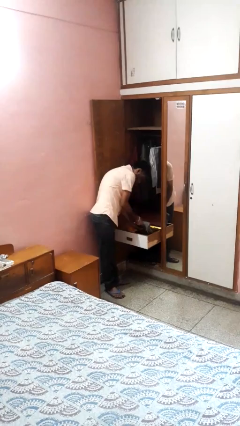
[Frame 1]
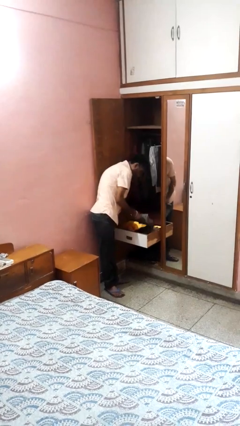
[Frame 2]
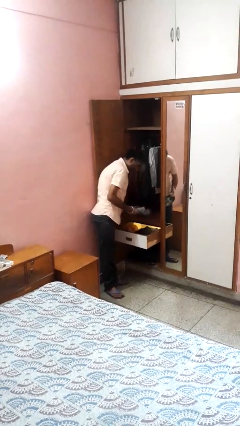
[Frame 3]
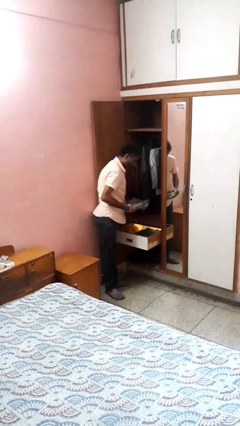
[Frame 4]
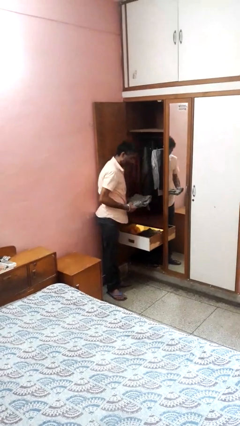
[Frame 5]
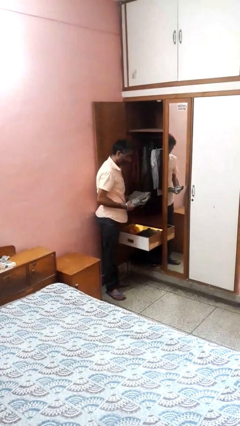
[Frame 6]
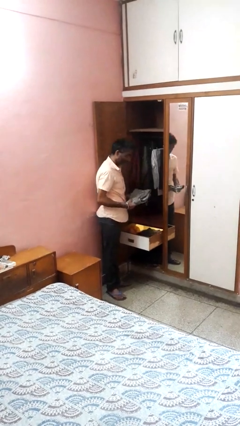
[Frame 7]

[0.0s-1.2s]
person takes clothes from dresser

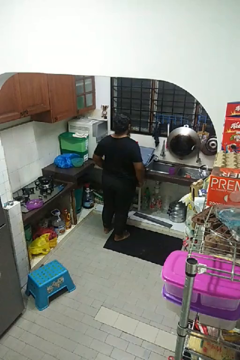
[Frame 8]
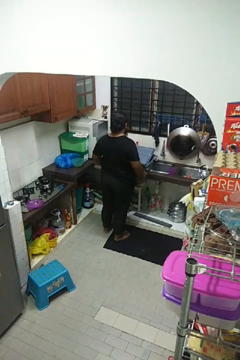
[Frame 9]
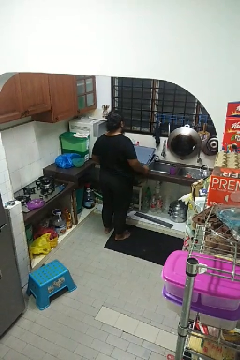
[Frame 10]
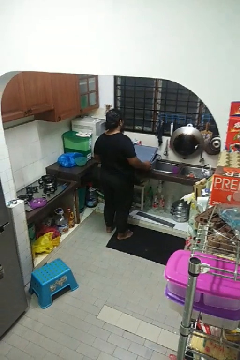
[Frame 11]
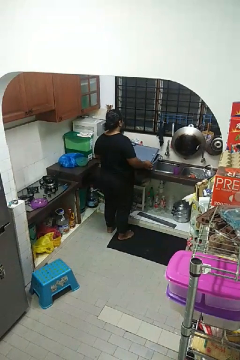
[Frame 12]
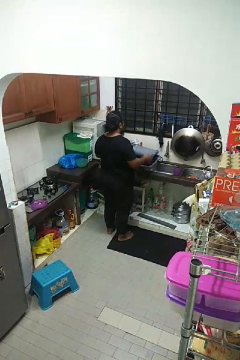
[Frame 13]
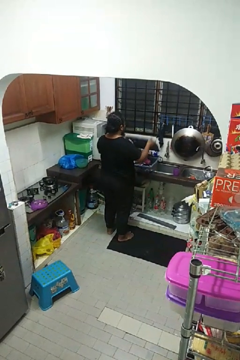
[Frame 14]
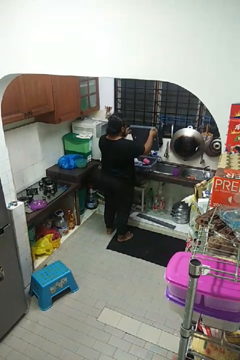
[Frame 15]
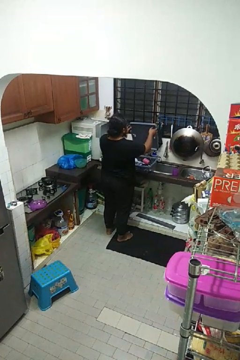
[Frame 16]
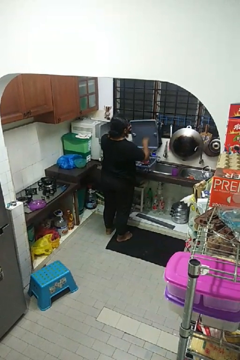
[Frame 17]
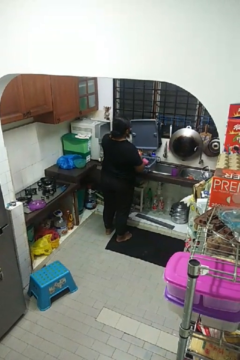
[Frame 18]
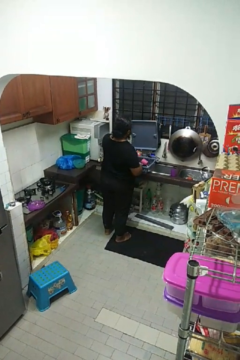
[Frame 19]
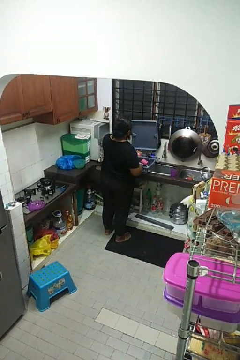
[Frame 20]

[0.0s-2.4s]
person opens dishwasher

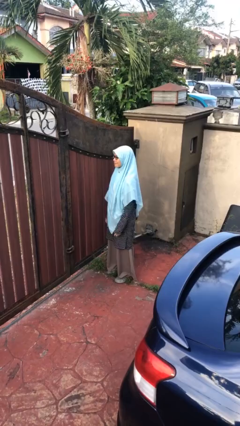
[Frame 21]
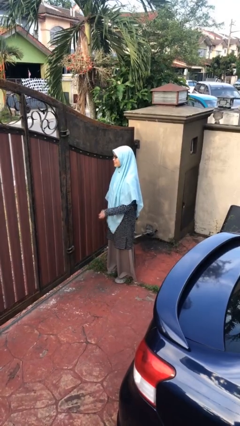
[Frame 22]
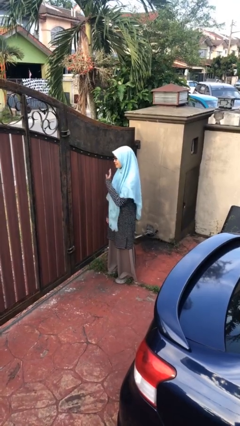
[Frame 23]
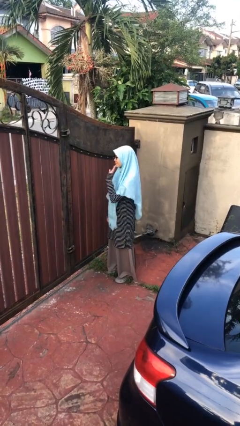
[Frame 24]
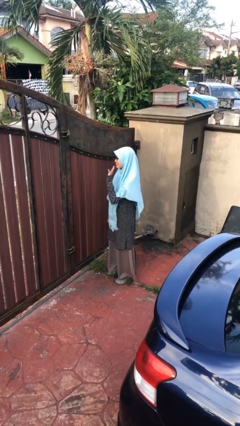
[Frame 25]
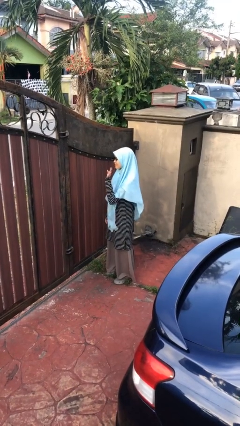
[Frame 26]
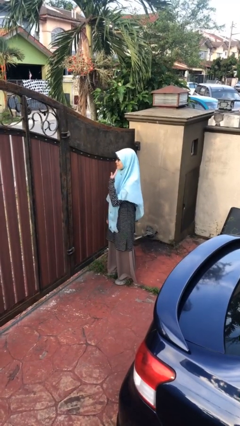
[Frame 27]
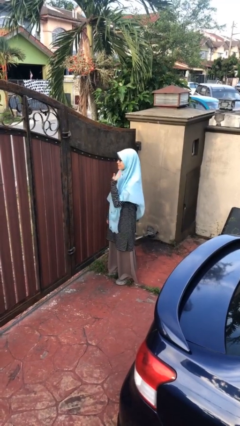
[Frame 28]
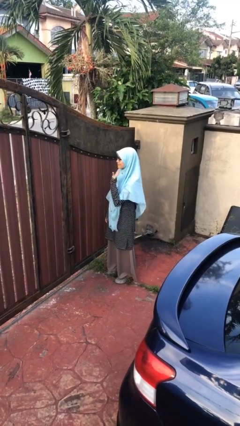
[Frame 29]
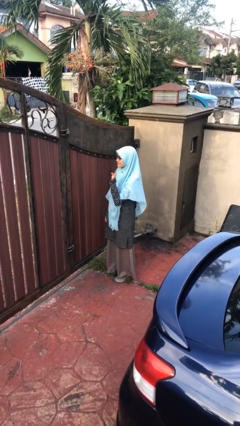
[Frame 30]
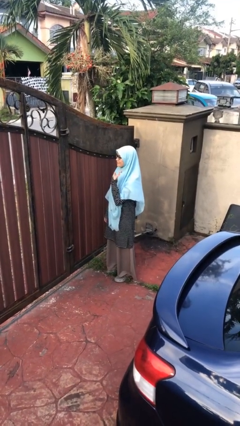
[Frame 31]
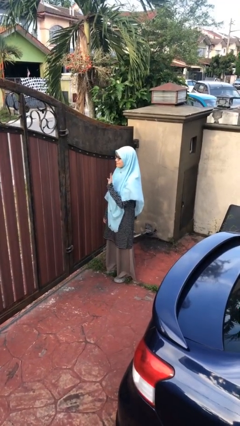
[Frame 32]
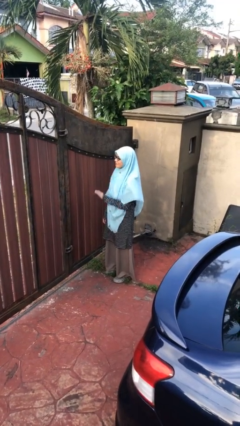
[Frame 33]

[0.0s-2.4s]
person waves at person

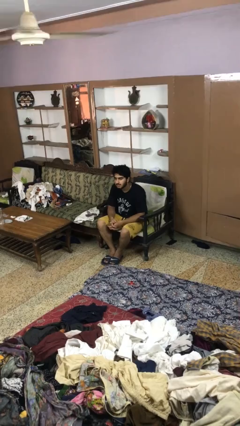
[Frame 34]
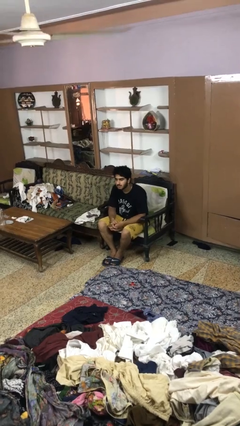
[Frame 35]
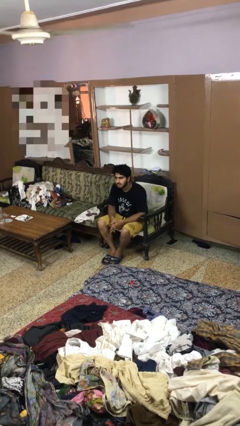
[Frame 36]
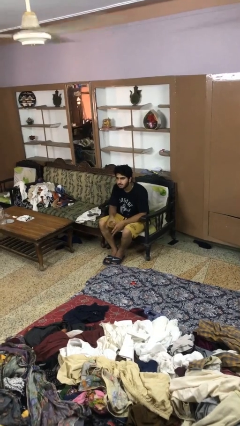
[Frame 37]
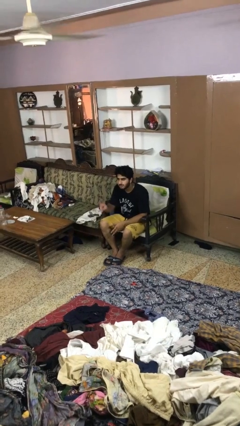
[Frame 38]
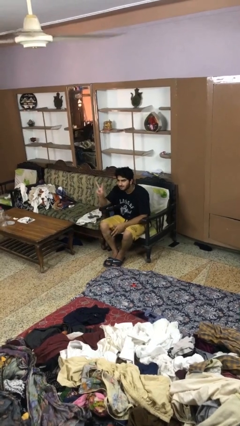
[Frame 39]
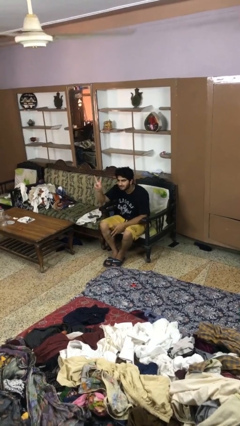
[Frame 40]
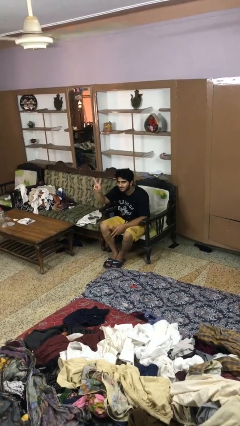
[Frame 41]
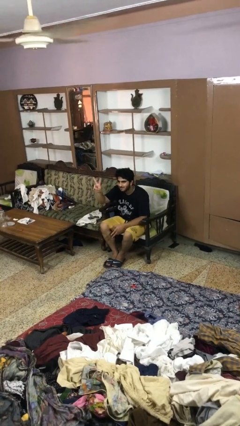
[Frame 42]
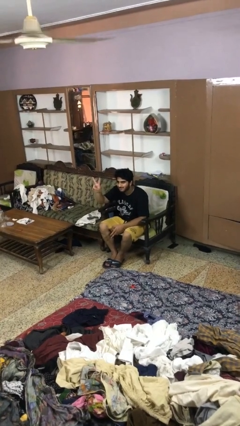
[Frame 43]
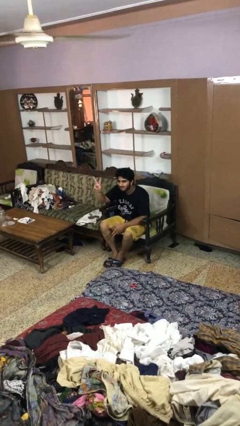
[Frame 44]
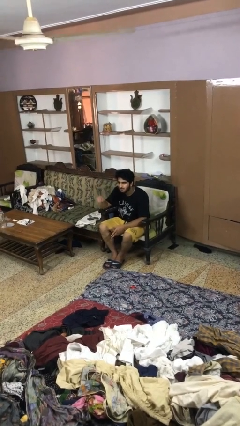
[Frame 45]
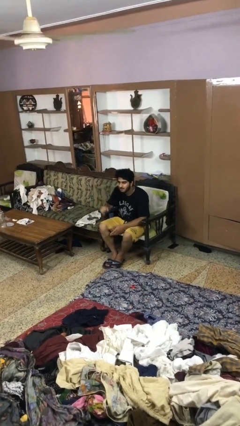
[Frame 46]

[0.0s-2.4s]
person gestures peace

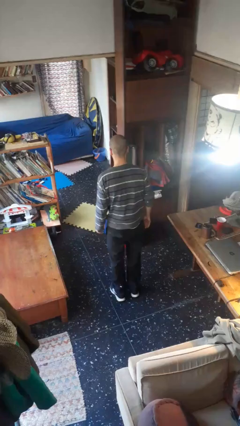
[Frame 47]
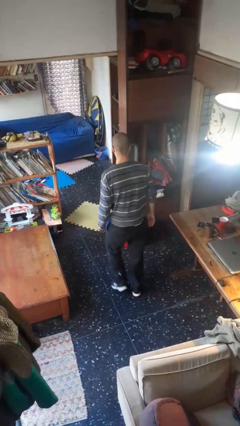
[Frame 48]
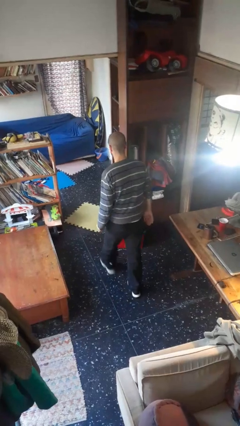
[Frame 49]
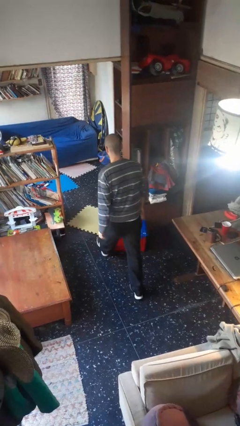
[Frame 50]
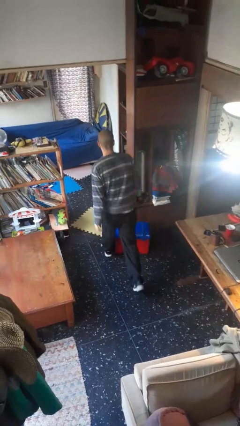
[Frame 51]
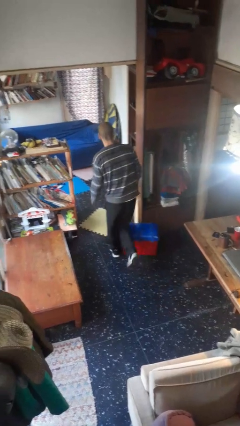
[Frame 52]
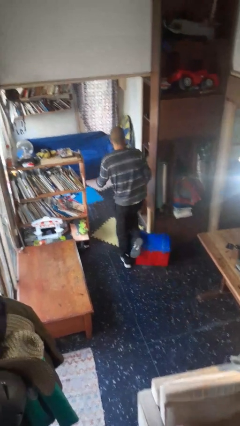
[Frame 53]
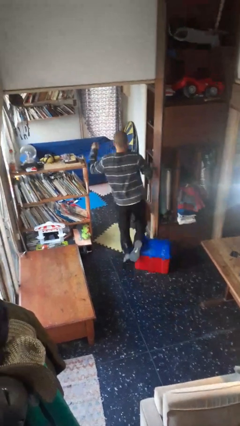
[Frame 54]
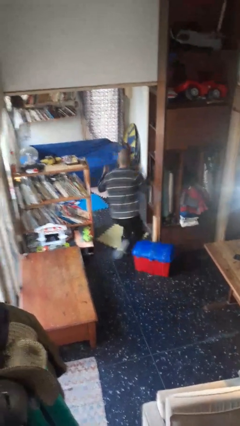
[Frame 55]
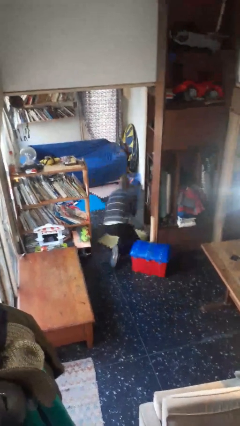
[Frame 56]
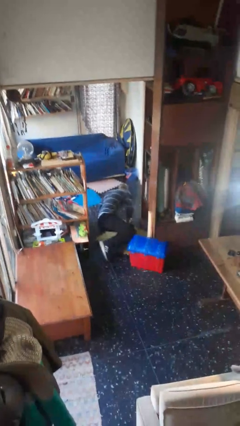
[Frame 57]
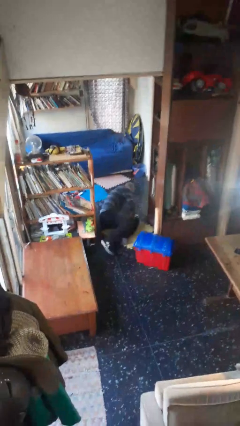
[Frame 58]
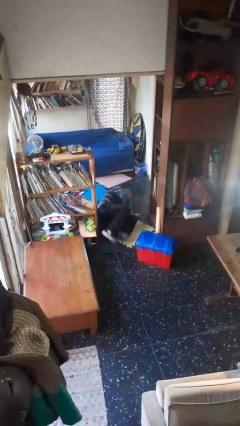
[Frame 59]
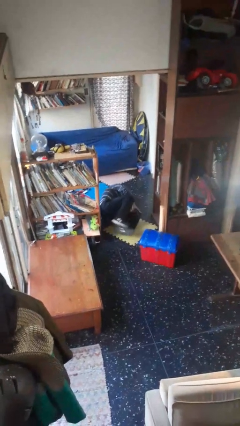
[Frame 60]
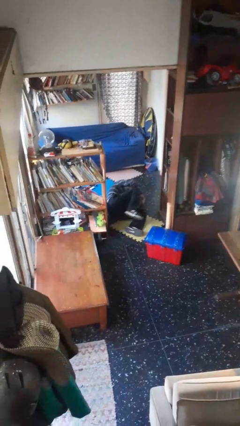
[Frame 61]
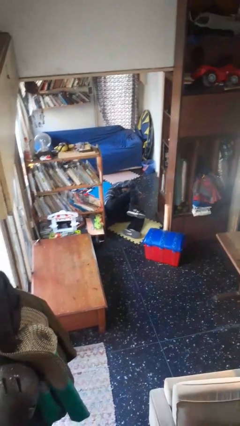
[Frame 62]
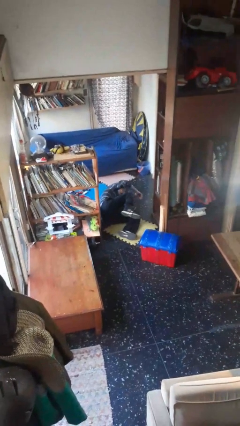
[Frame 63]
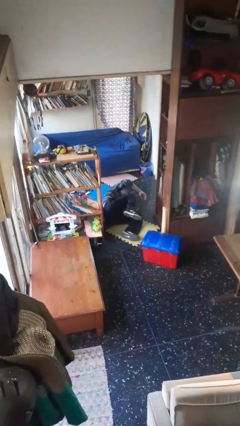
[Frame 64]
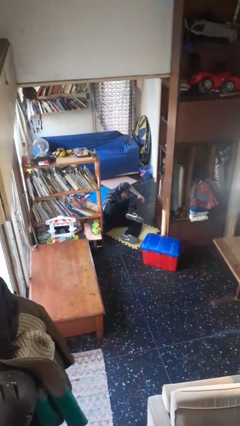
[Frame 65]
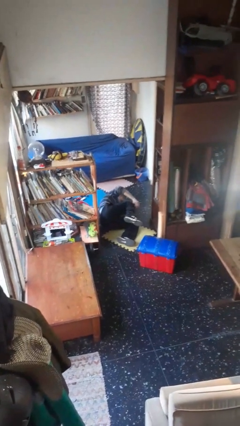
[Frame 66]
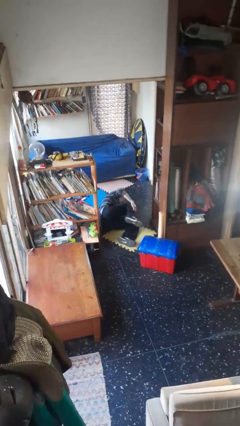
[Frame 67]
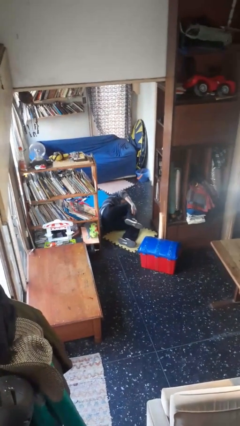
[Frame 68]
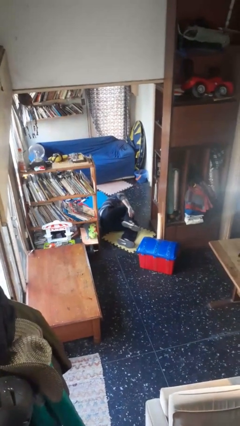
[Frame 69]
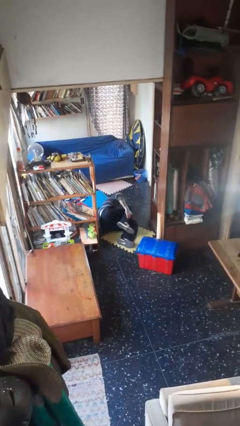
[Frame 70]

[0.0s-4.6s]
person trips on object on floor

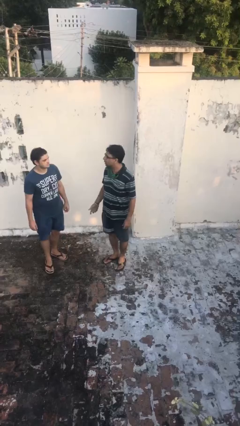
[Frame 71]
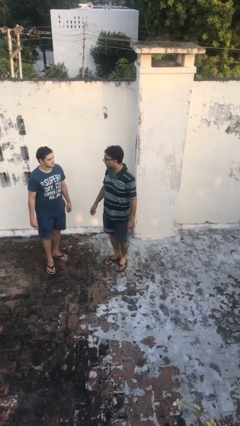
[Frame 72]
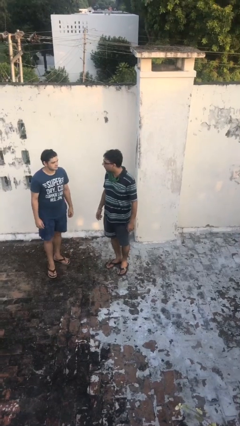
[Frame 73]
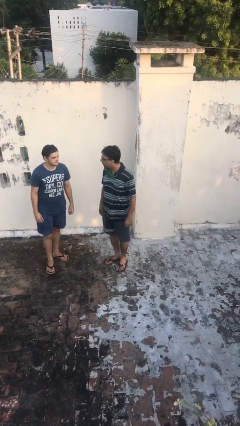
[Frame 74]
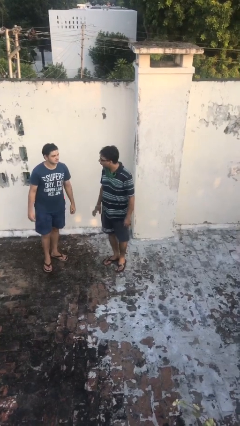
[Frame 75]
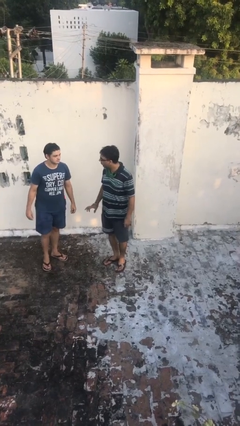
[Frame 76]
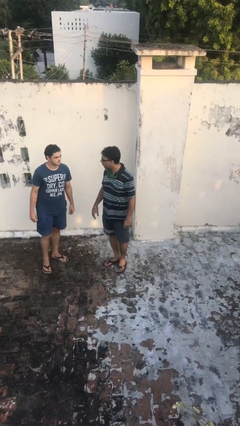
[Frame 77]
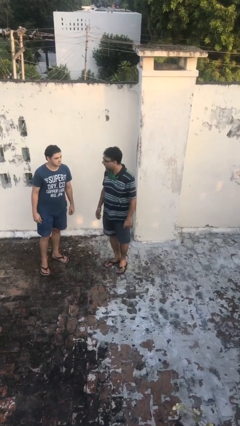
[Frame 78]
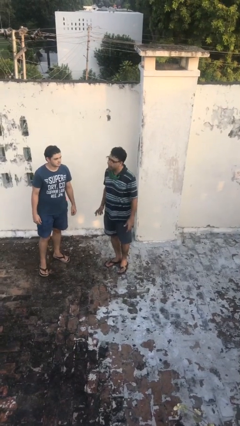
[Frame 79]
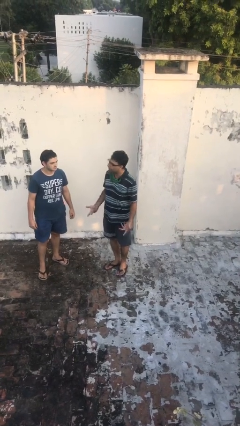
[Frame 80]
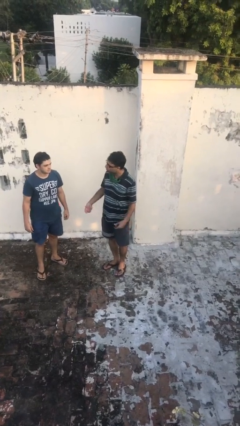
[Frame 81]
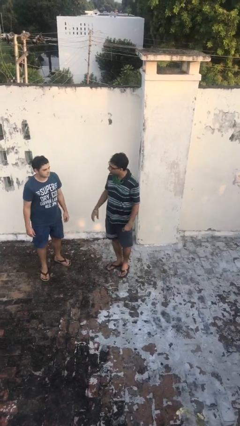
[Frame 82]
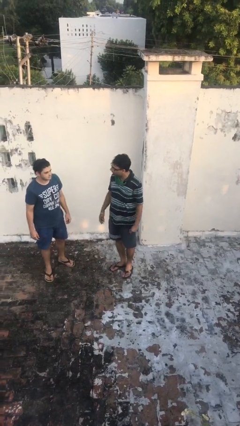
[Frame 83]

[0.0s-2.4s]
person talks to person

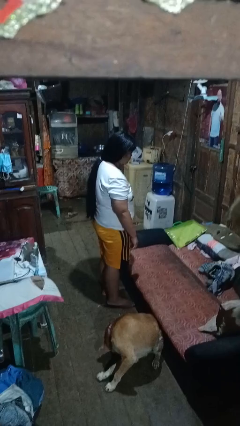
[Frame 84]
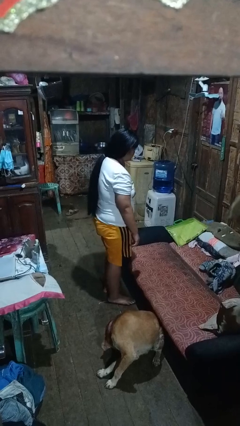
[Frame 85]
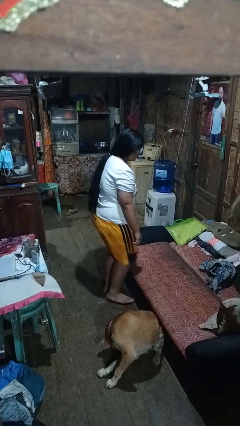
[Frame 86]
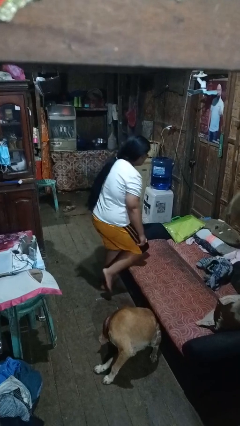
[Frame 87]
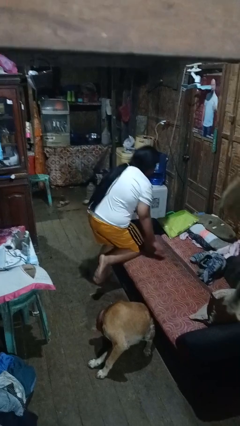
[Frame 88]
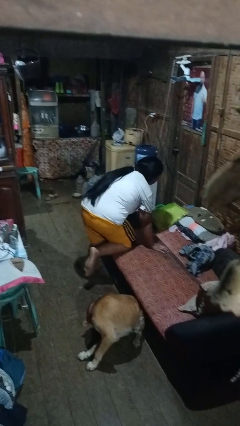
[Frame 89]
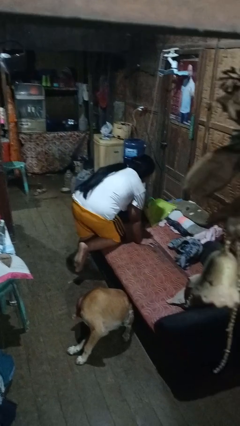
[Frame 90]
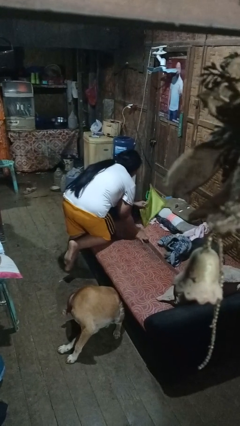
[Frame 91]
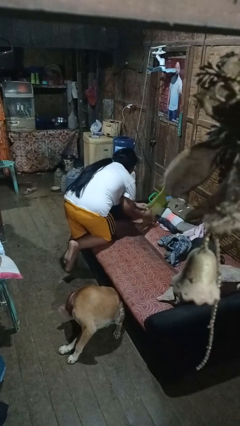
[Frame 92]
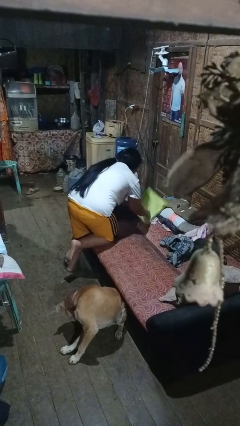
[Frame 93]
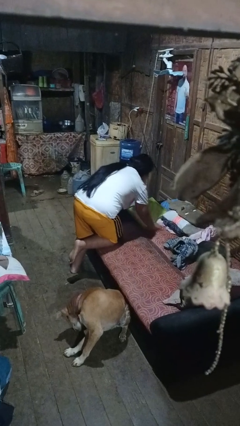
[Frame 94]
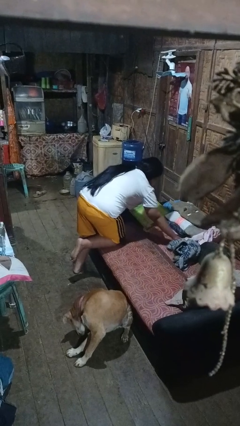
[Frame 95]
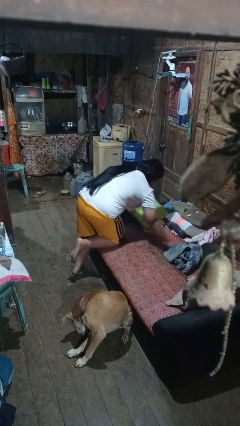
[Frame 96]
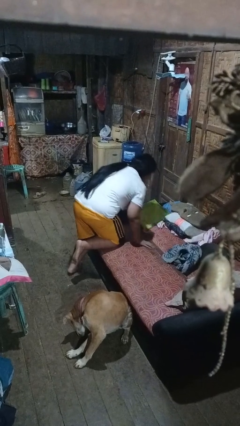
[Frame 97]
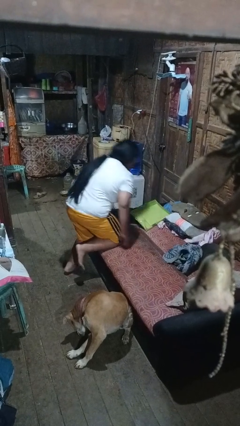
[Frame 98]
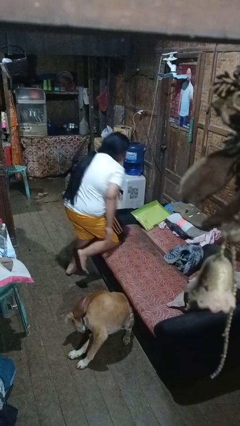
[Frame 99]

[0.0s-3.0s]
person searches in couch
